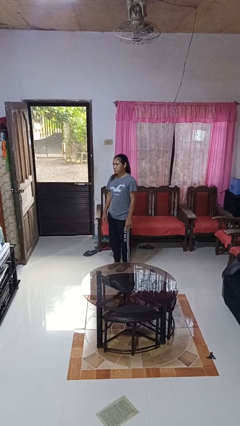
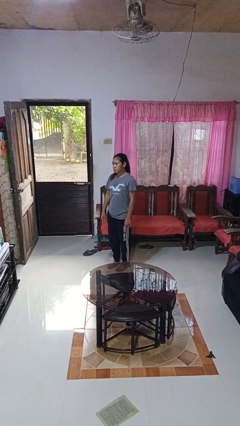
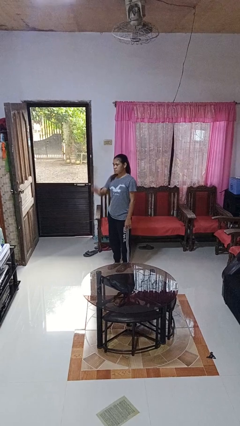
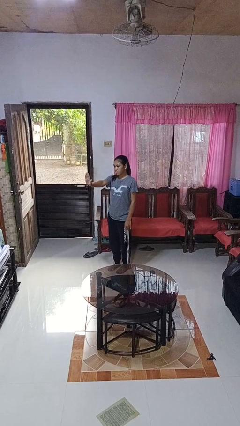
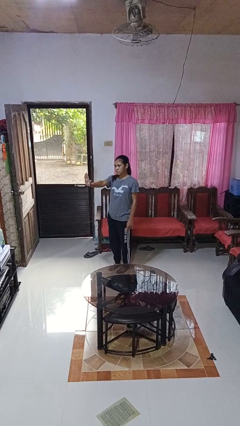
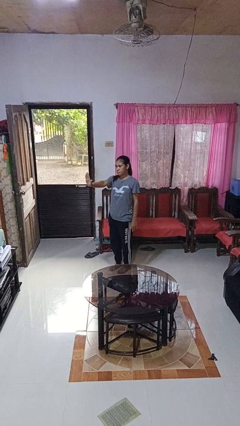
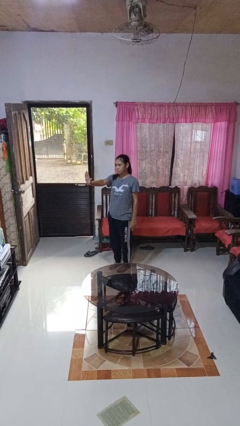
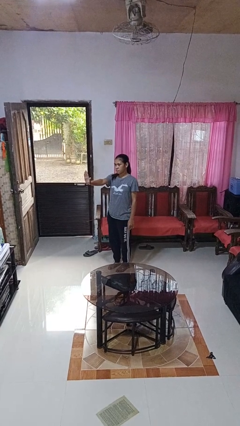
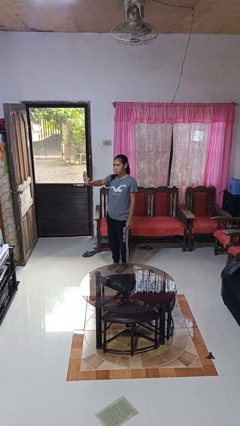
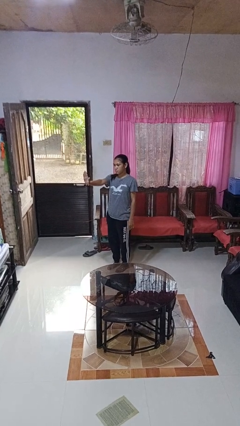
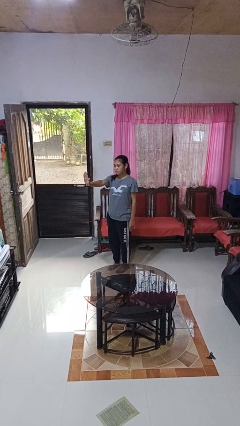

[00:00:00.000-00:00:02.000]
person gestures stop

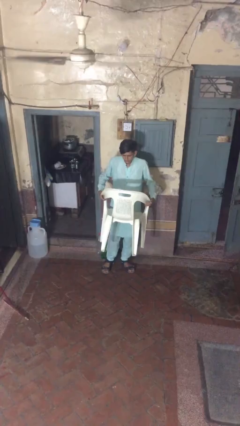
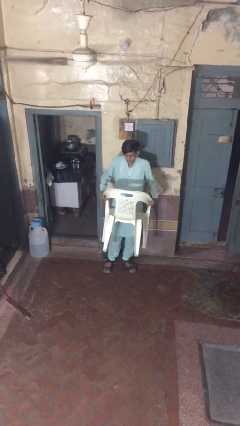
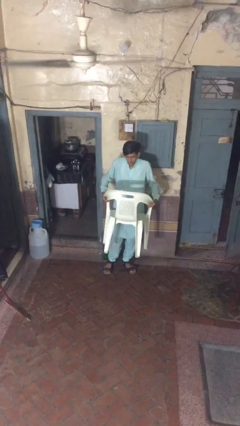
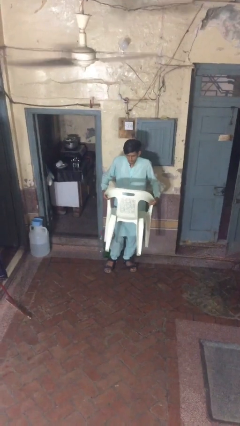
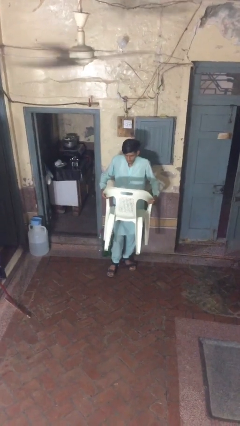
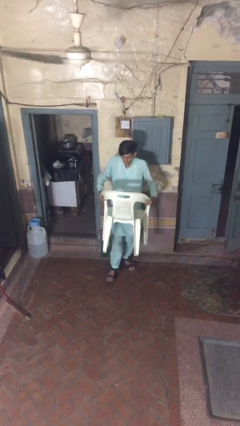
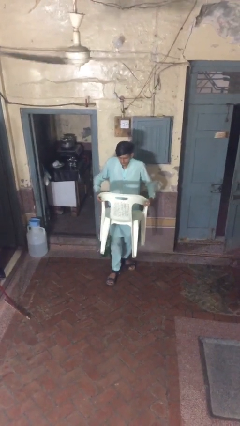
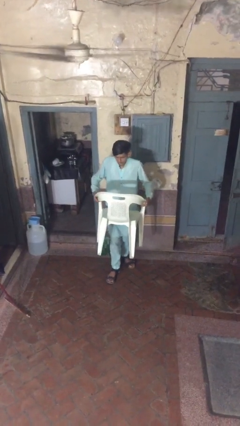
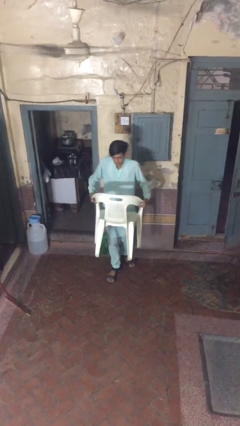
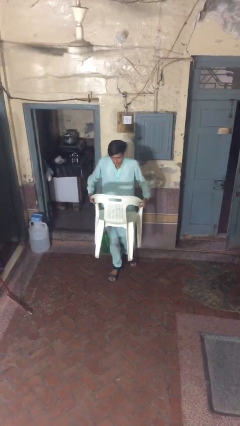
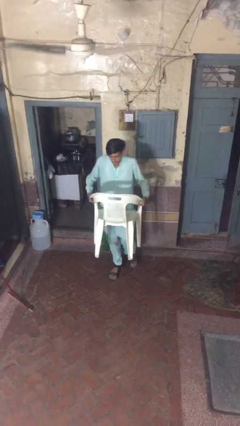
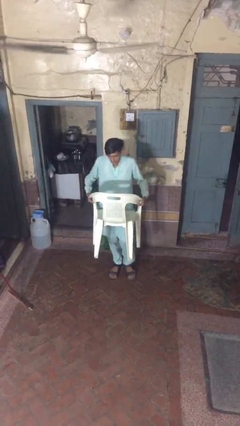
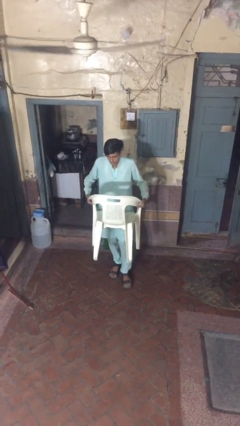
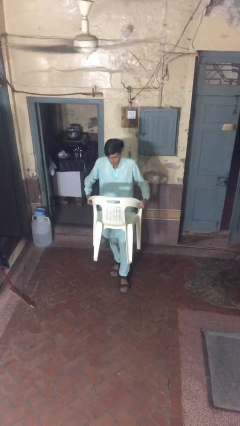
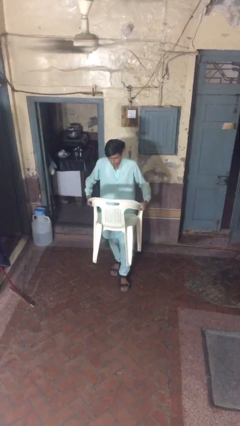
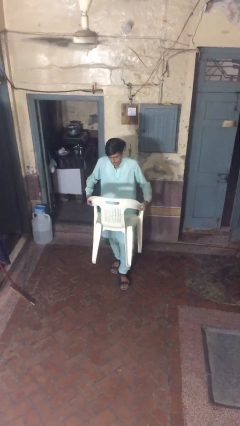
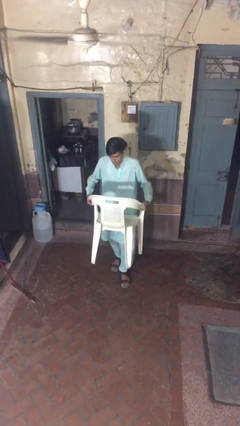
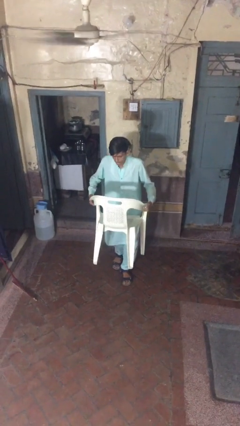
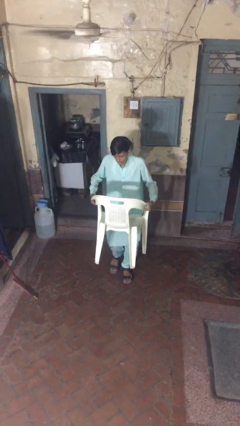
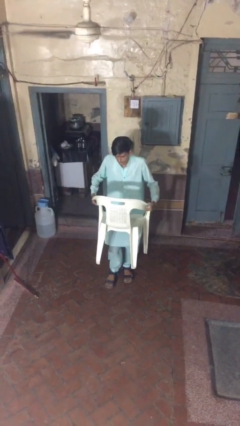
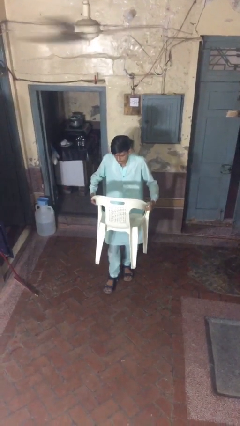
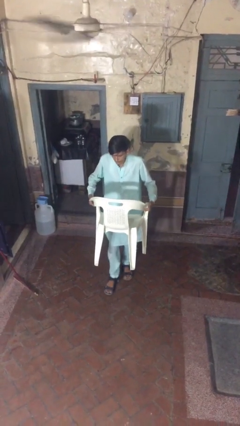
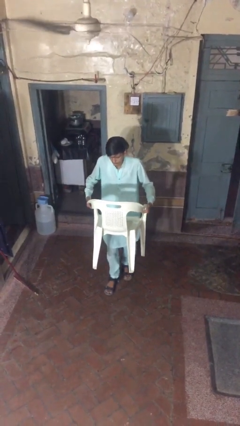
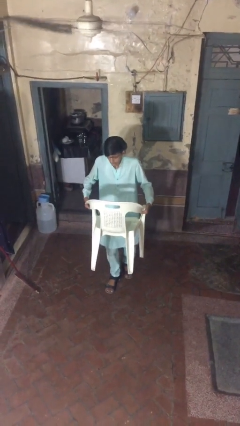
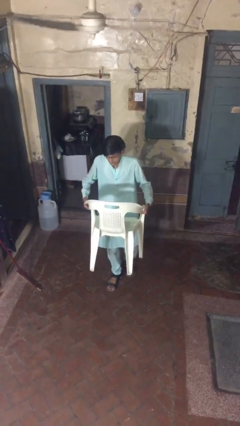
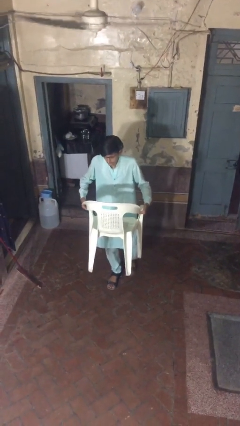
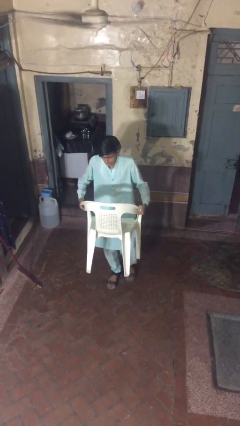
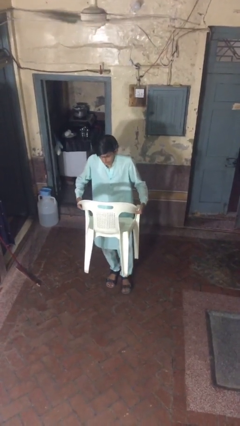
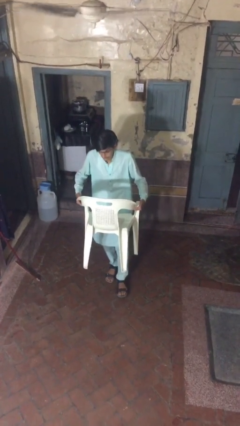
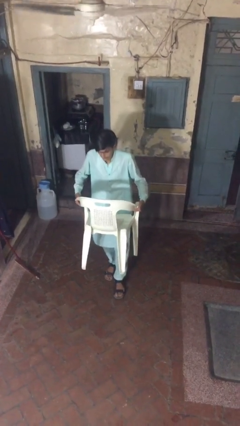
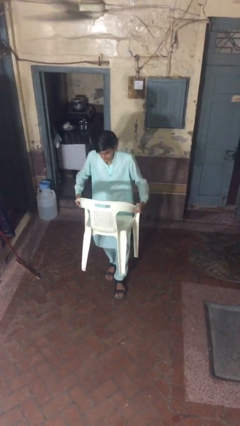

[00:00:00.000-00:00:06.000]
person carries heavy object

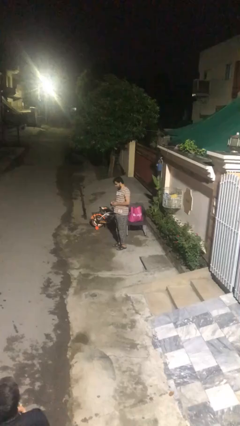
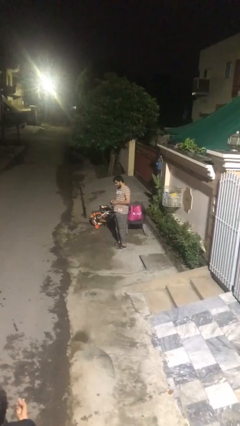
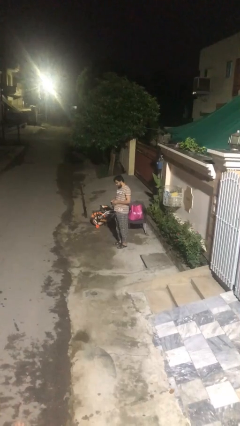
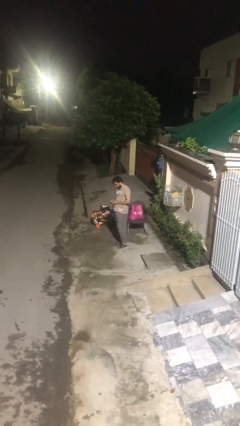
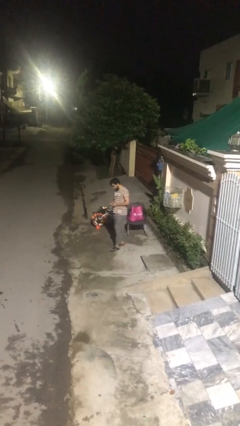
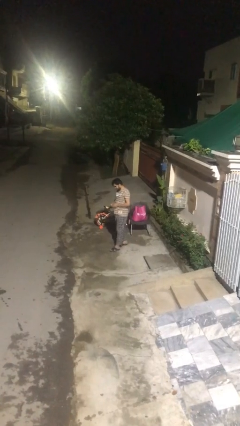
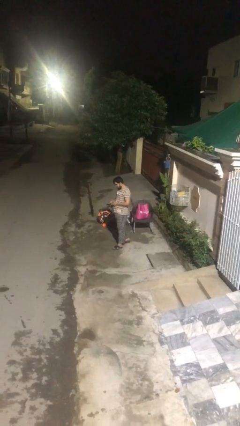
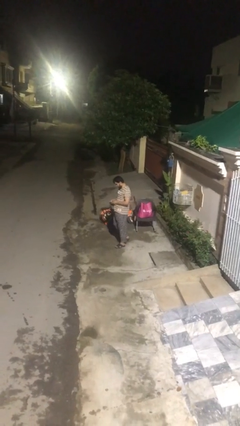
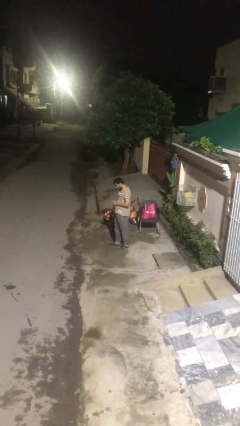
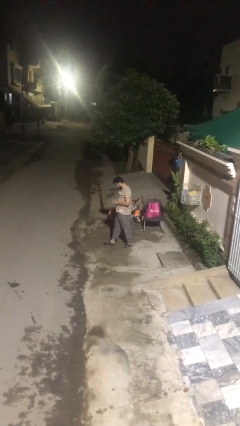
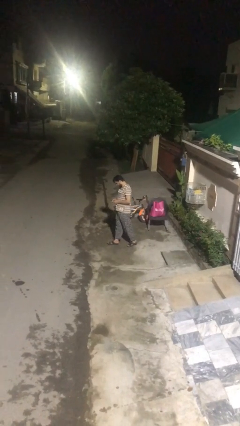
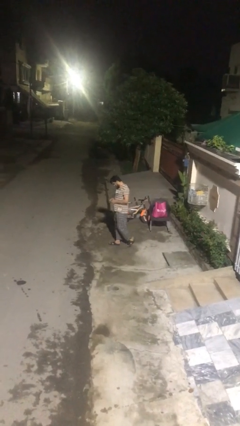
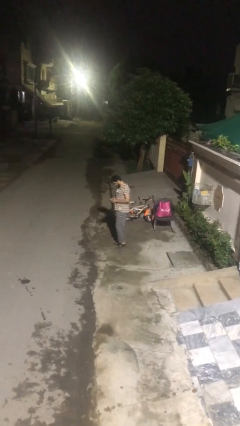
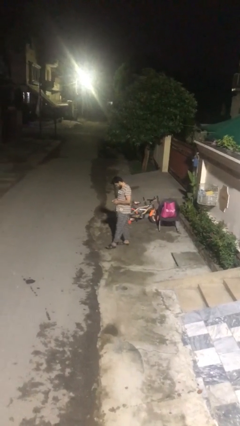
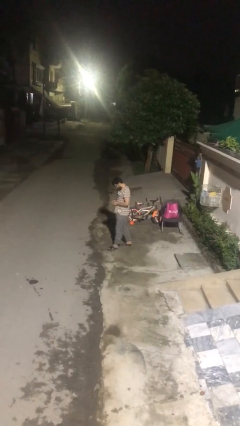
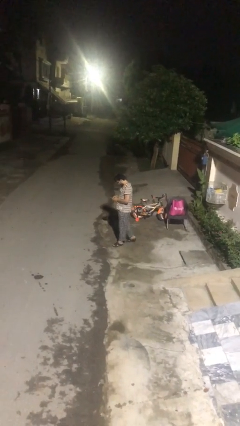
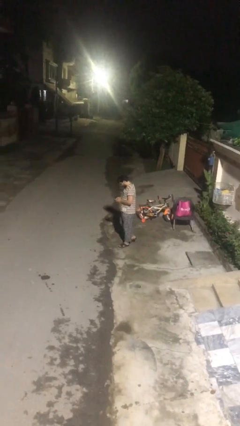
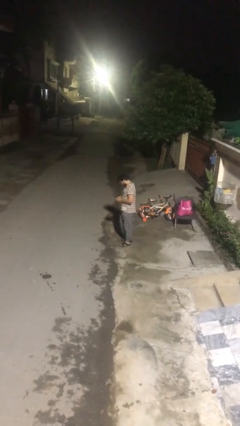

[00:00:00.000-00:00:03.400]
person texts on phone

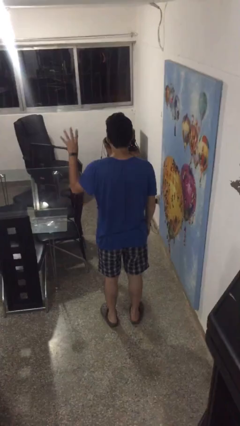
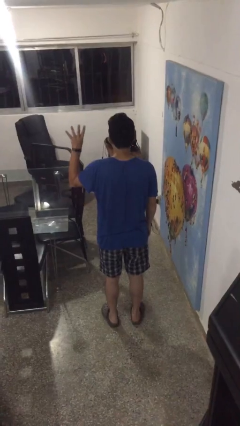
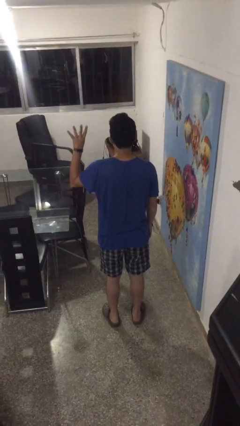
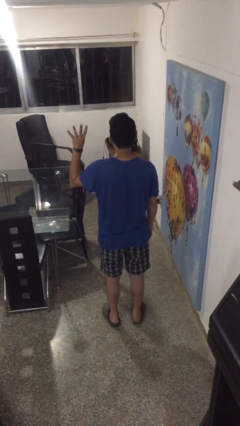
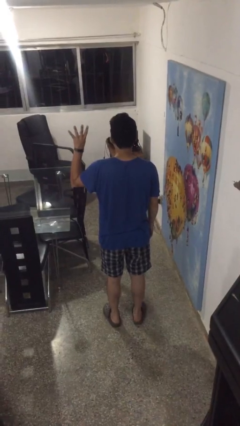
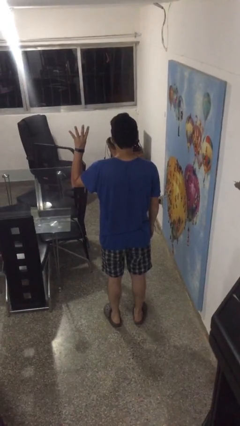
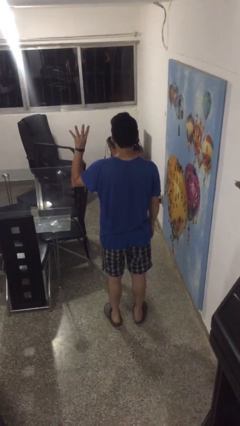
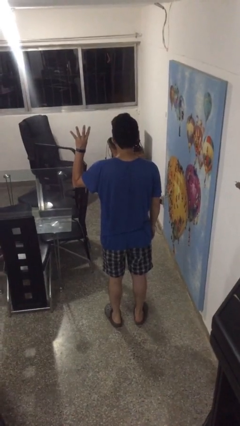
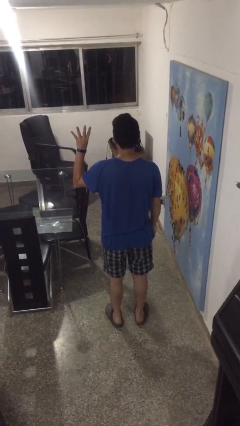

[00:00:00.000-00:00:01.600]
person gestures number four

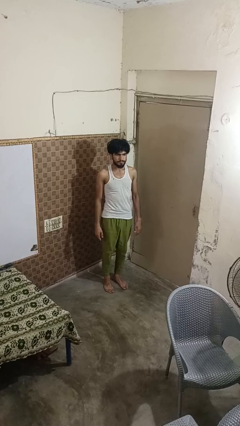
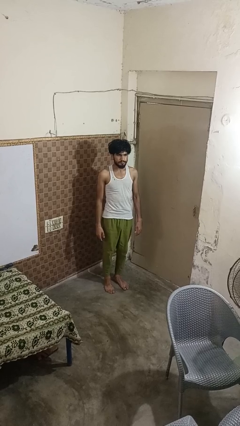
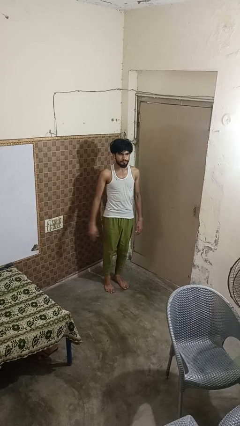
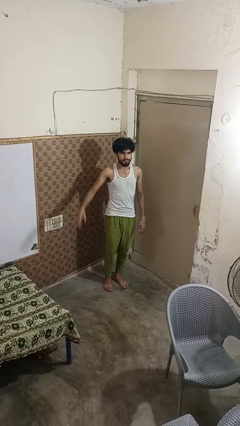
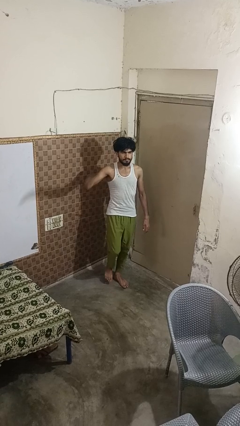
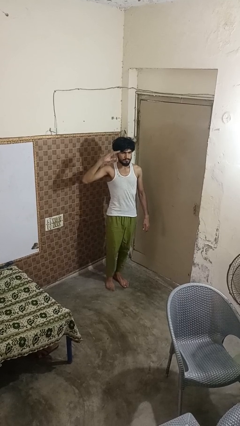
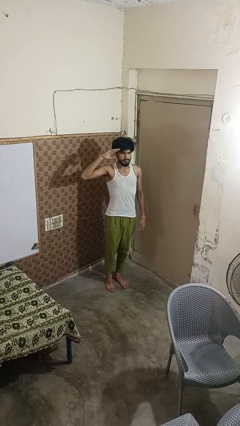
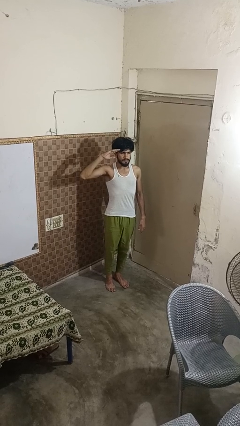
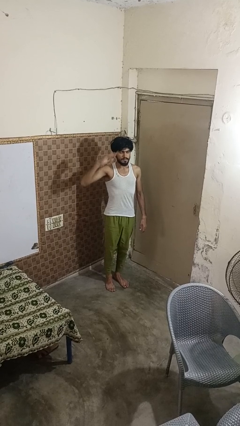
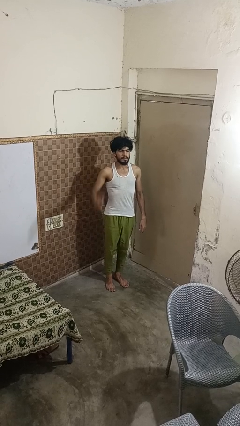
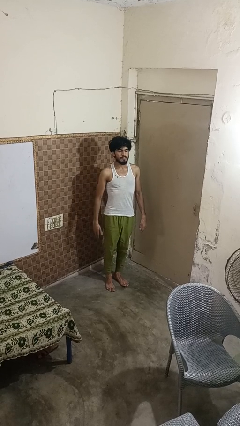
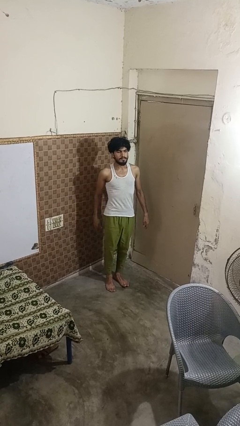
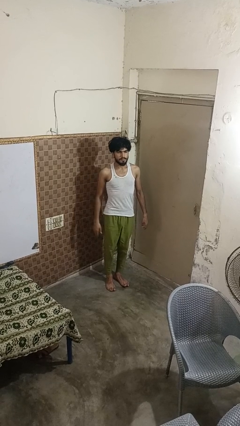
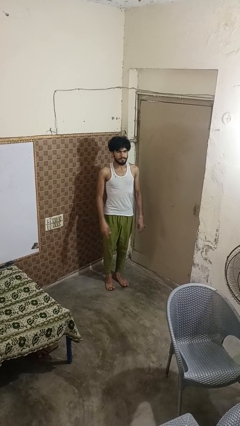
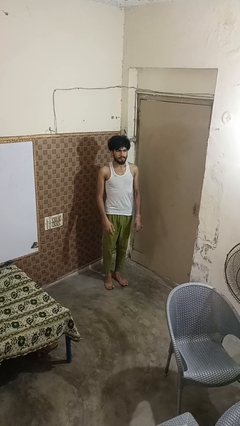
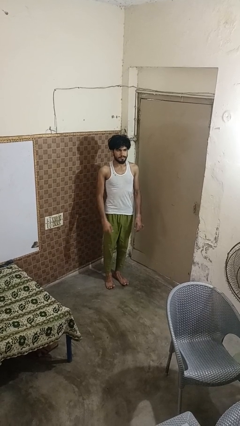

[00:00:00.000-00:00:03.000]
person salutes

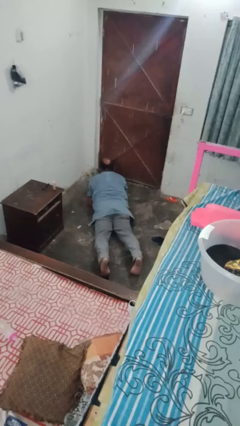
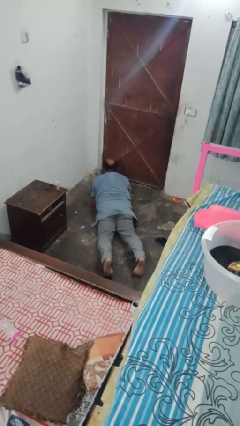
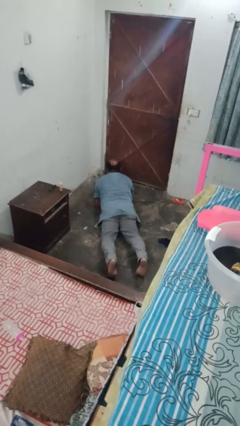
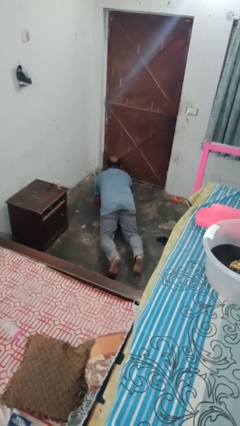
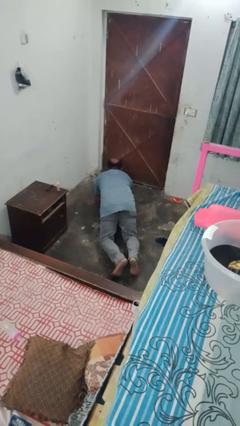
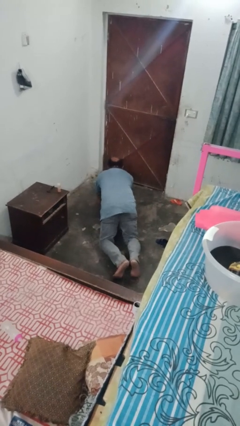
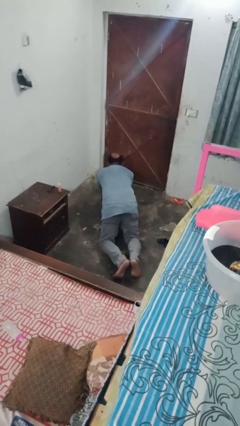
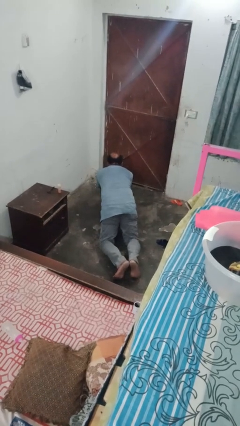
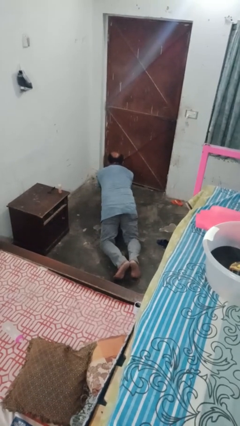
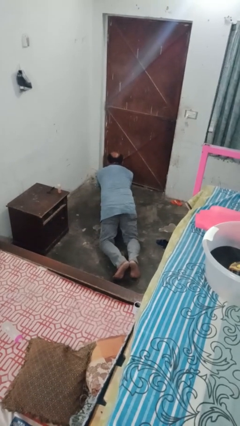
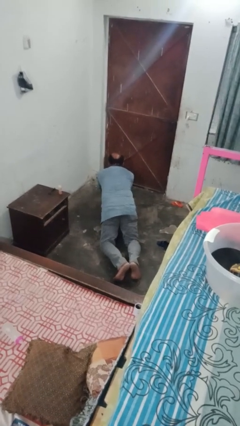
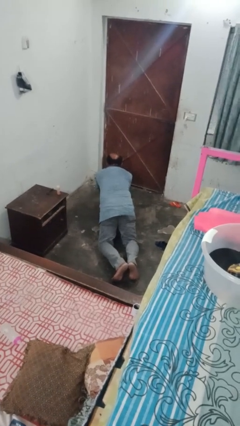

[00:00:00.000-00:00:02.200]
person exercises with plank
